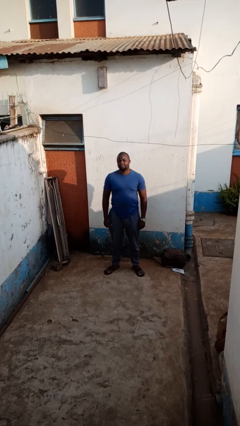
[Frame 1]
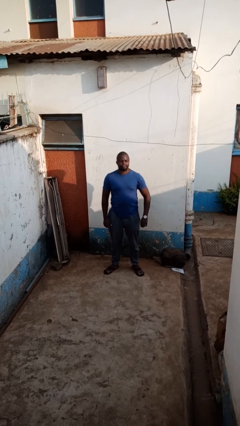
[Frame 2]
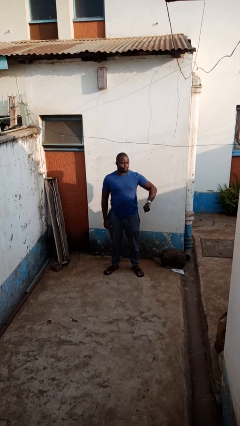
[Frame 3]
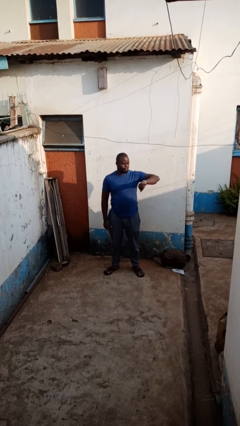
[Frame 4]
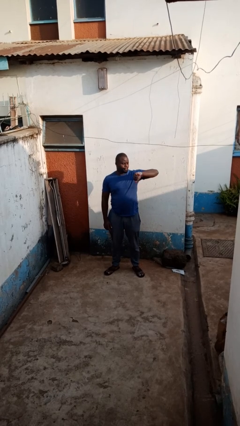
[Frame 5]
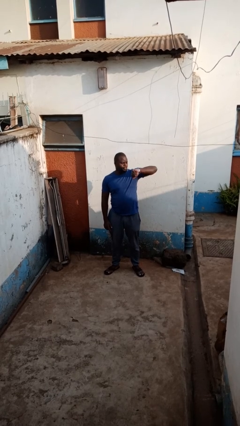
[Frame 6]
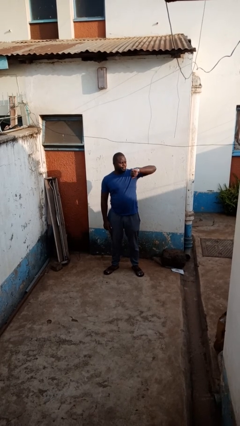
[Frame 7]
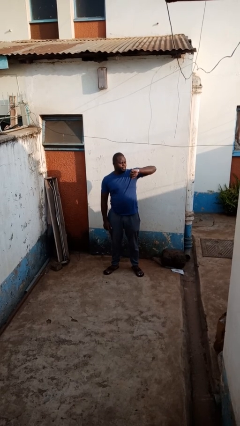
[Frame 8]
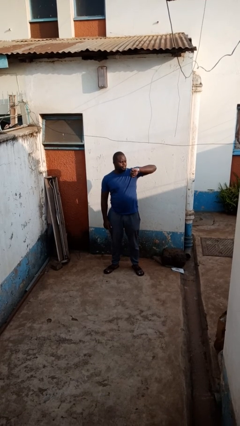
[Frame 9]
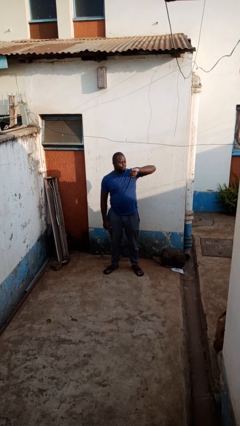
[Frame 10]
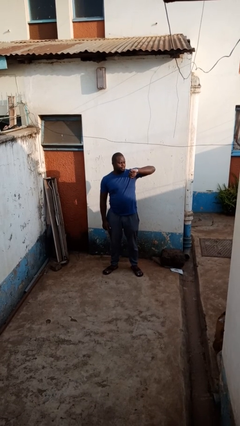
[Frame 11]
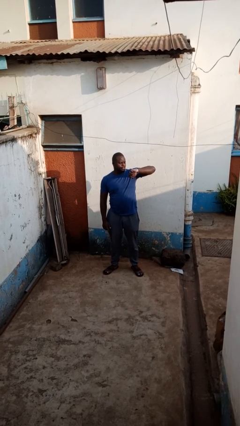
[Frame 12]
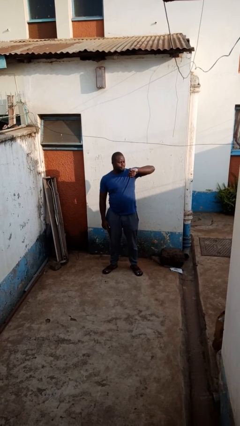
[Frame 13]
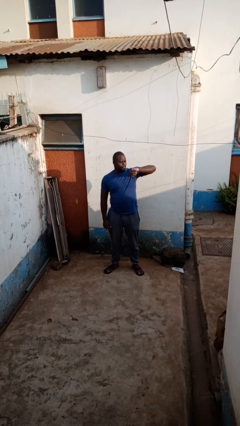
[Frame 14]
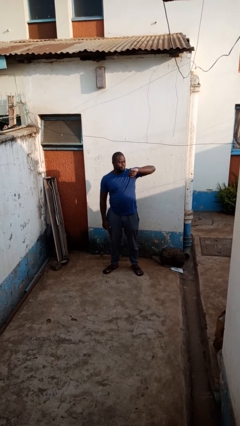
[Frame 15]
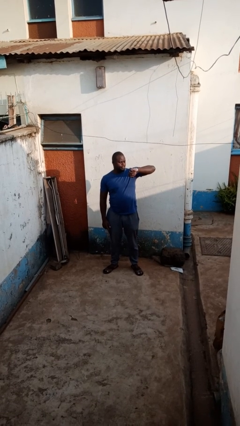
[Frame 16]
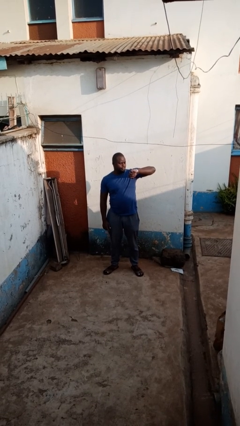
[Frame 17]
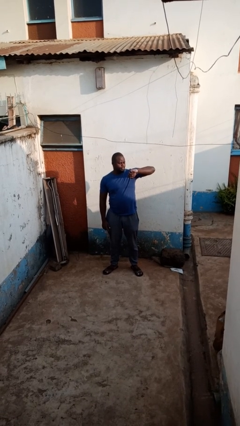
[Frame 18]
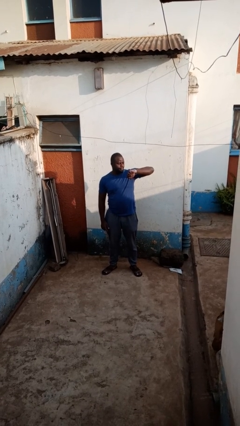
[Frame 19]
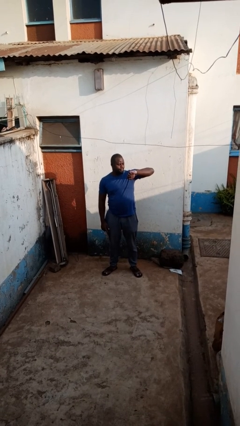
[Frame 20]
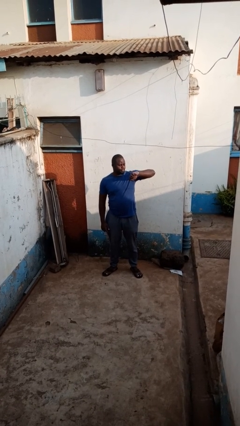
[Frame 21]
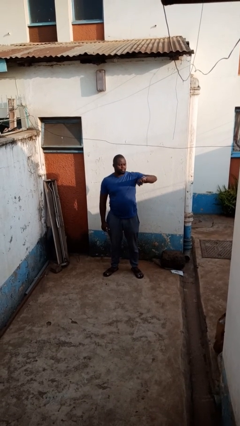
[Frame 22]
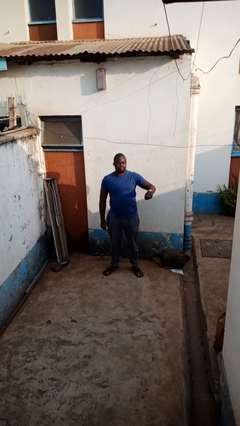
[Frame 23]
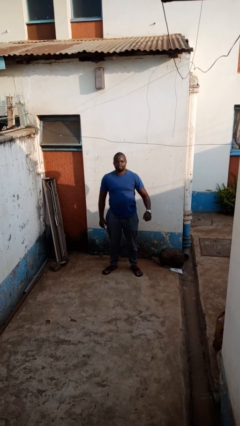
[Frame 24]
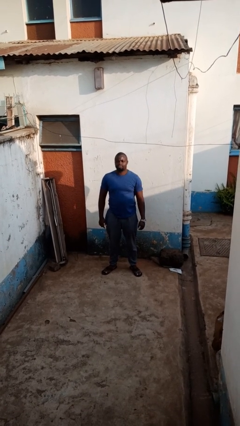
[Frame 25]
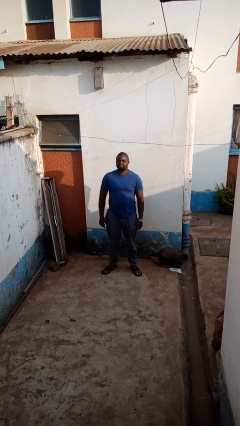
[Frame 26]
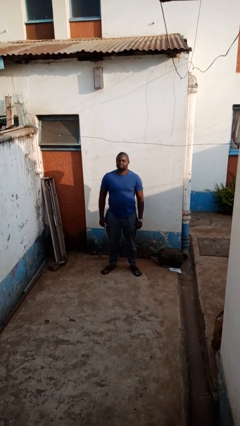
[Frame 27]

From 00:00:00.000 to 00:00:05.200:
person looks at wristwatch

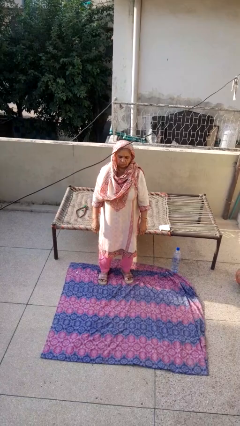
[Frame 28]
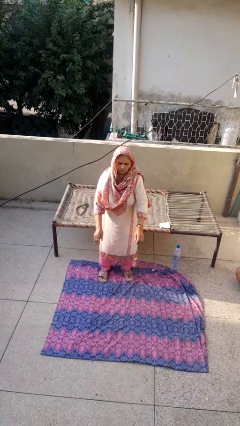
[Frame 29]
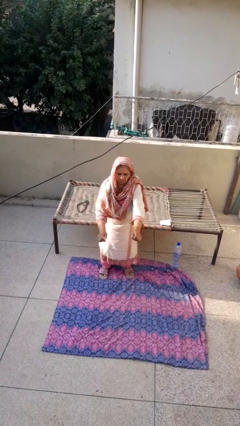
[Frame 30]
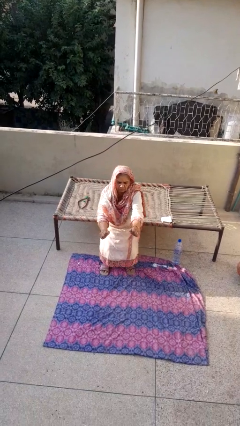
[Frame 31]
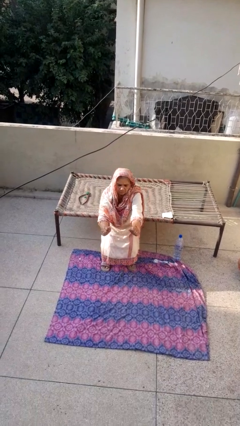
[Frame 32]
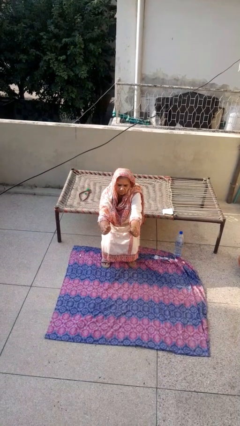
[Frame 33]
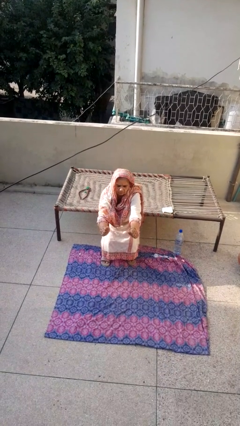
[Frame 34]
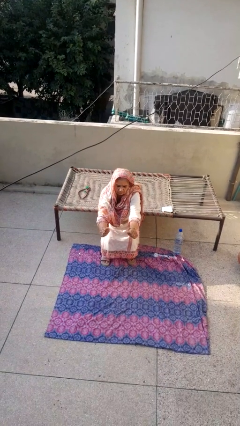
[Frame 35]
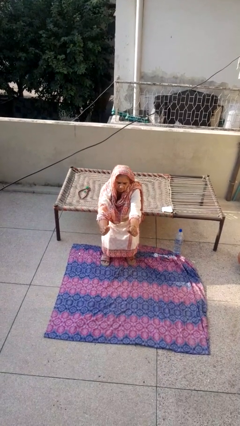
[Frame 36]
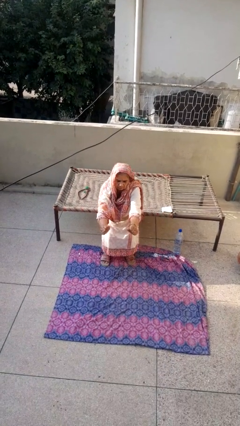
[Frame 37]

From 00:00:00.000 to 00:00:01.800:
person squats

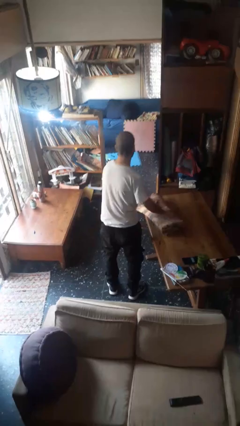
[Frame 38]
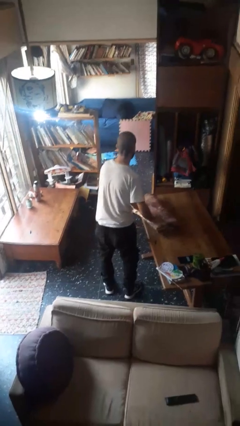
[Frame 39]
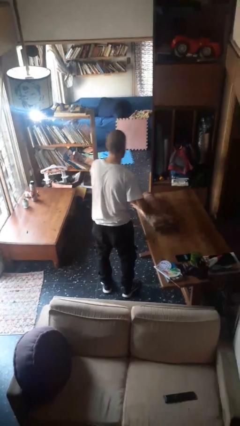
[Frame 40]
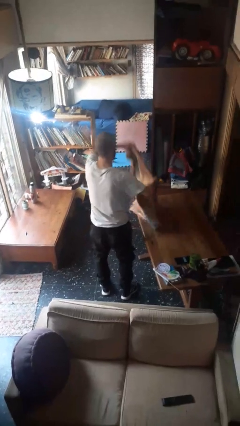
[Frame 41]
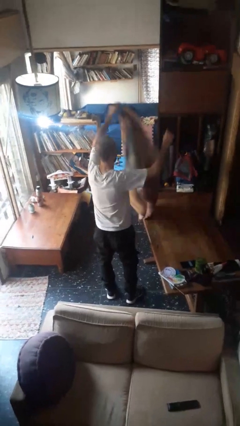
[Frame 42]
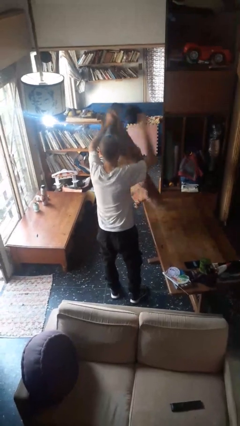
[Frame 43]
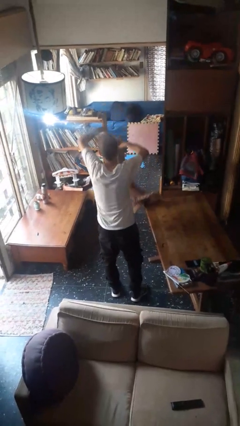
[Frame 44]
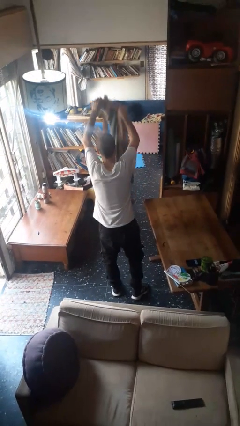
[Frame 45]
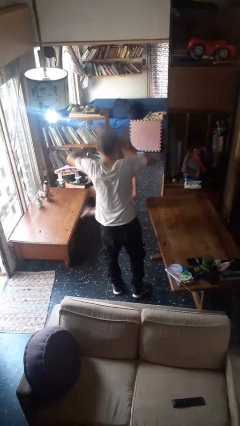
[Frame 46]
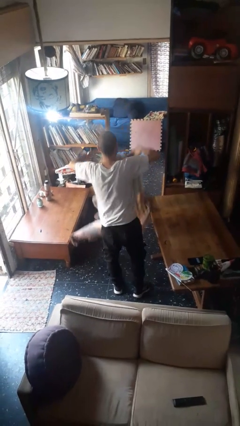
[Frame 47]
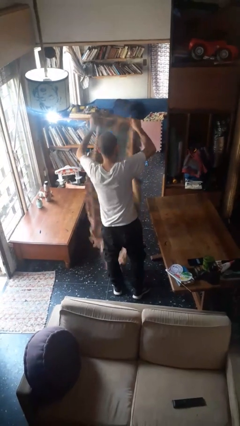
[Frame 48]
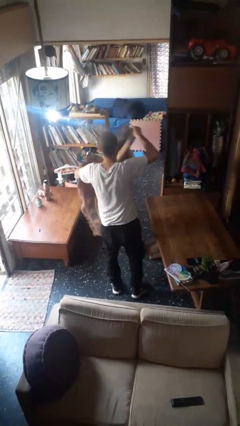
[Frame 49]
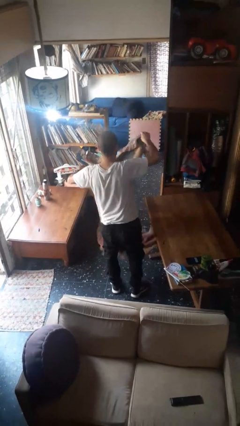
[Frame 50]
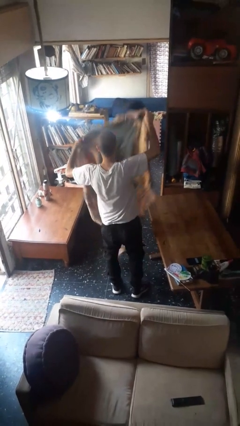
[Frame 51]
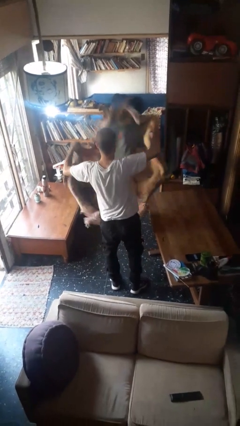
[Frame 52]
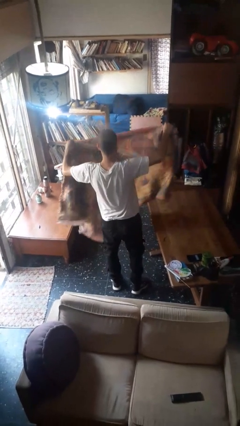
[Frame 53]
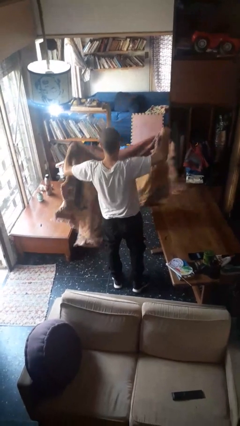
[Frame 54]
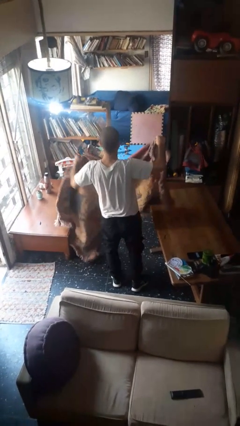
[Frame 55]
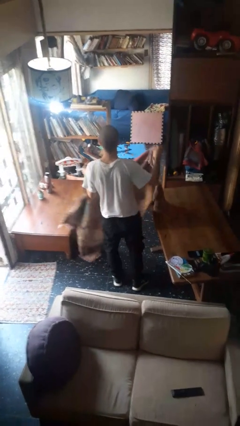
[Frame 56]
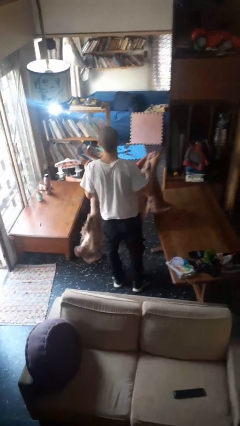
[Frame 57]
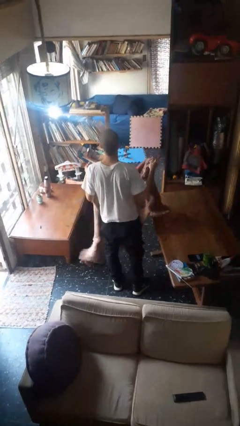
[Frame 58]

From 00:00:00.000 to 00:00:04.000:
person unfolds blanket

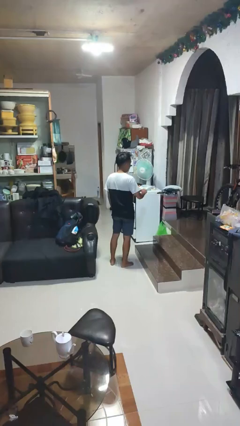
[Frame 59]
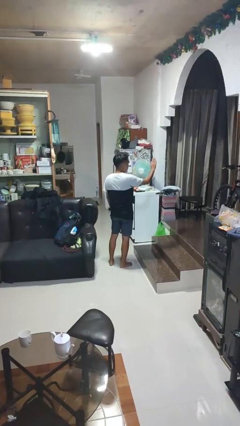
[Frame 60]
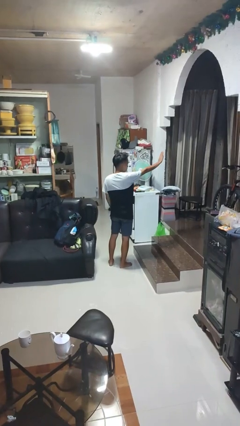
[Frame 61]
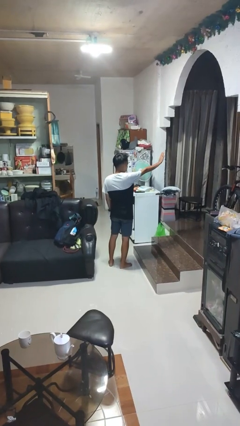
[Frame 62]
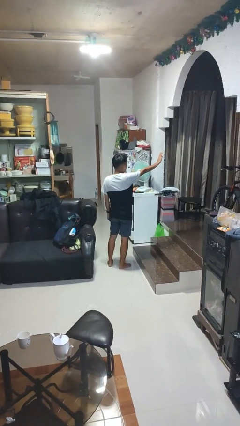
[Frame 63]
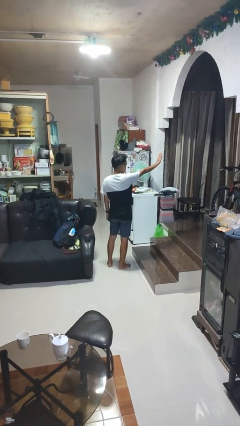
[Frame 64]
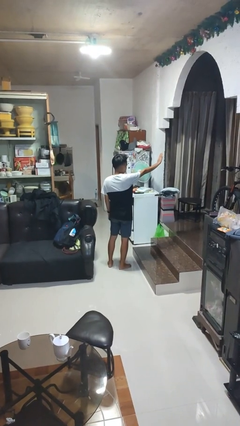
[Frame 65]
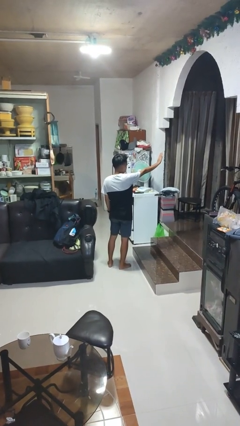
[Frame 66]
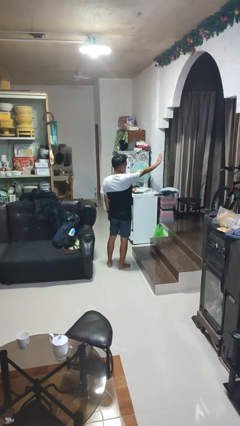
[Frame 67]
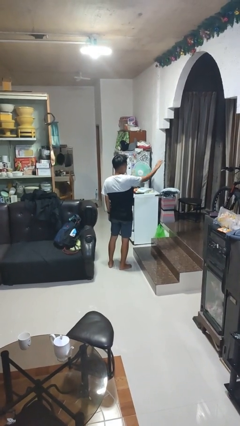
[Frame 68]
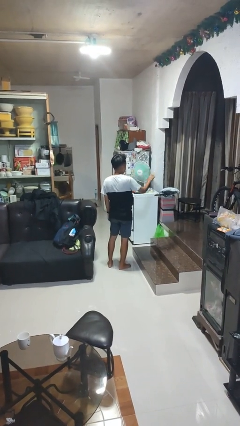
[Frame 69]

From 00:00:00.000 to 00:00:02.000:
person gestures stop

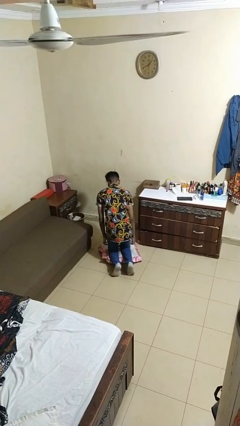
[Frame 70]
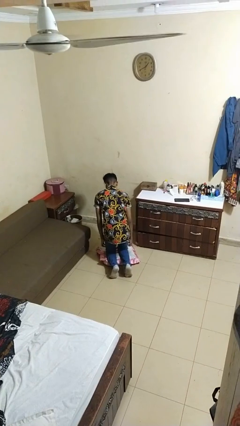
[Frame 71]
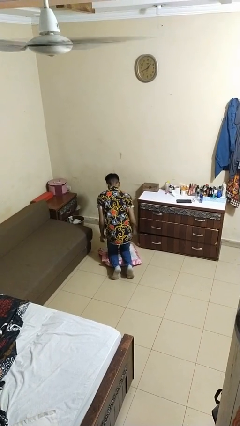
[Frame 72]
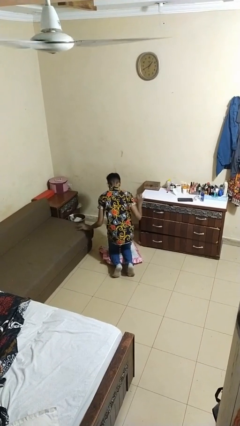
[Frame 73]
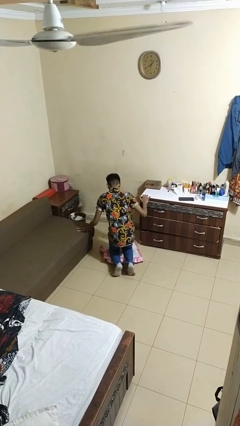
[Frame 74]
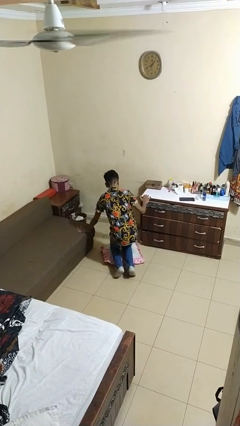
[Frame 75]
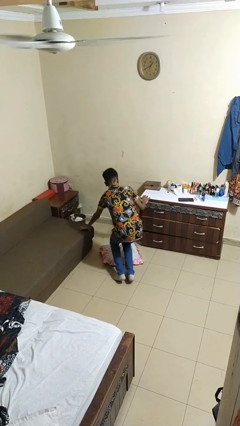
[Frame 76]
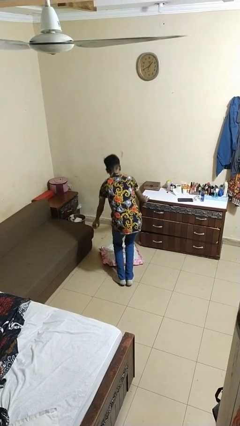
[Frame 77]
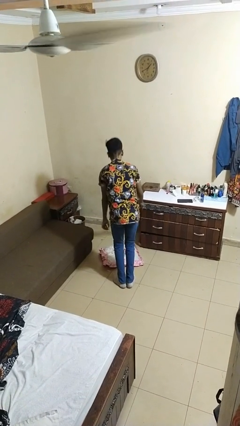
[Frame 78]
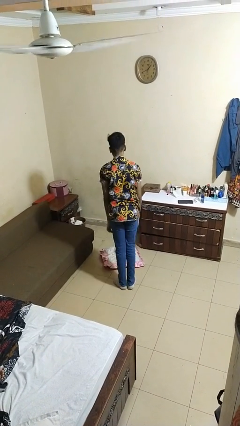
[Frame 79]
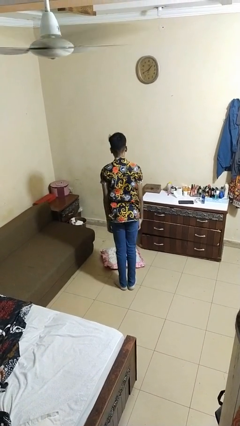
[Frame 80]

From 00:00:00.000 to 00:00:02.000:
person stands up from floor

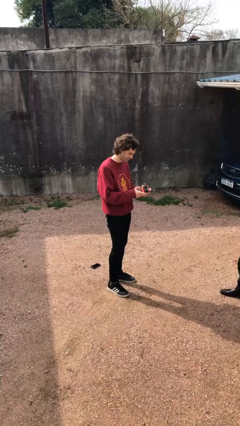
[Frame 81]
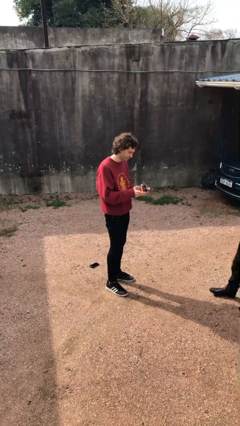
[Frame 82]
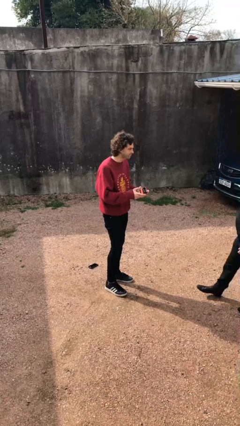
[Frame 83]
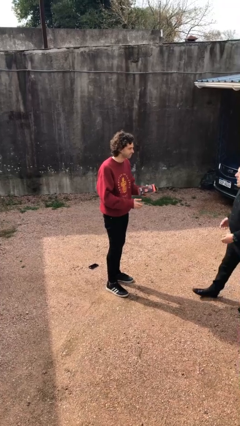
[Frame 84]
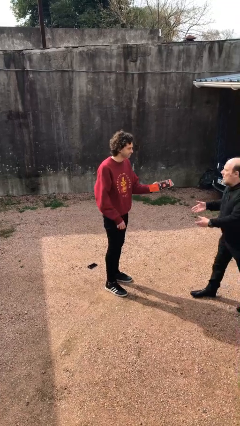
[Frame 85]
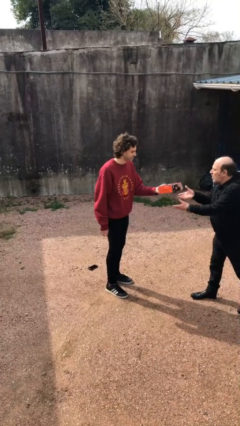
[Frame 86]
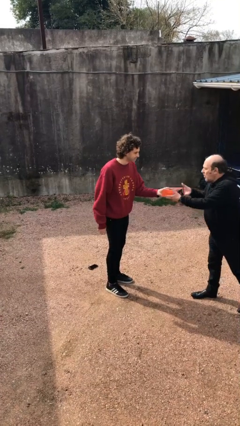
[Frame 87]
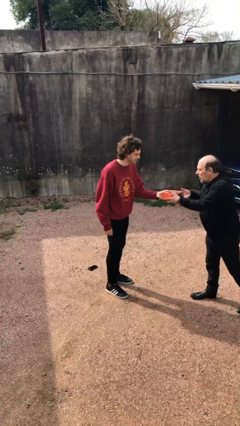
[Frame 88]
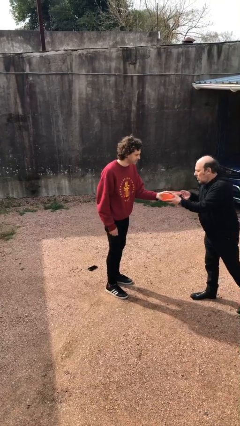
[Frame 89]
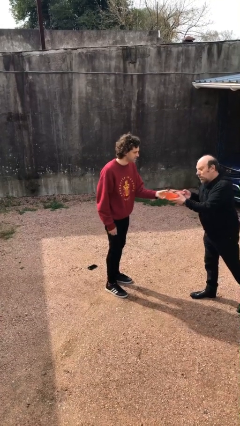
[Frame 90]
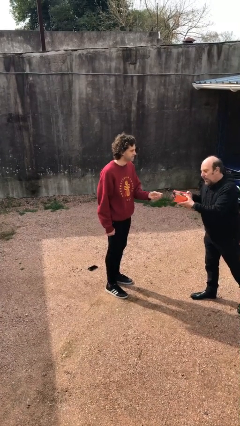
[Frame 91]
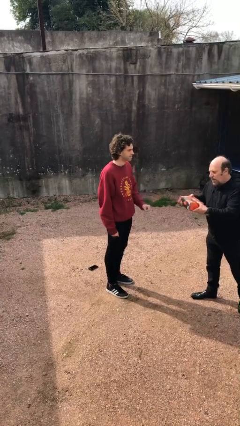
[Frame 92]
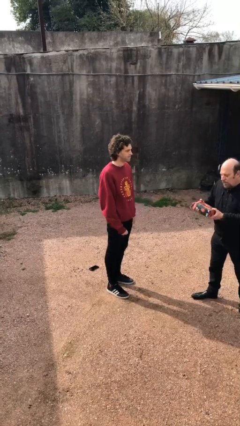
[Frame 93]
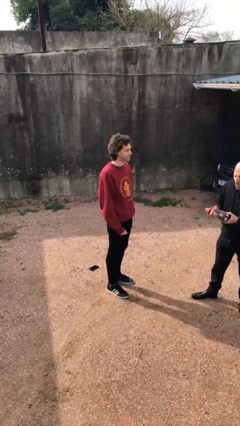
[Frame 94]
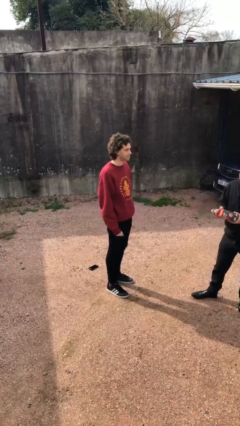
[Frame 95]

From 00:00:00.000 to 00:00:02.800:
person transfers object to person
